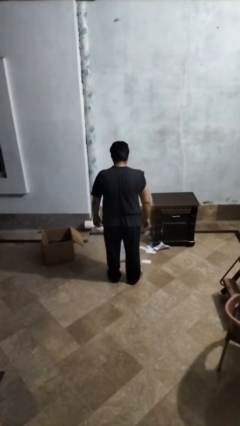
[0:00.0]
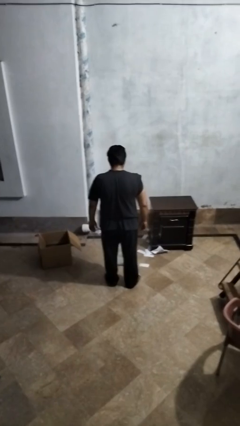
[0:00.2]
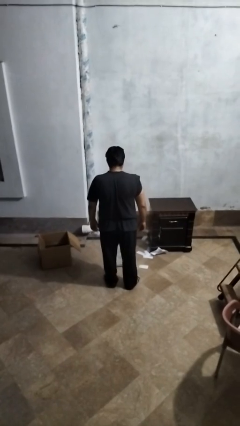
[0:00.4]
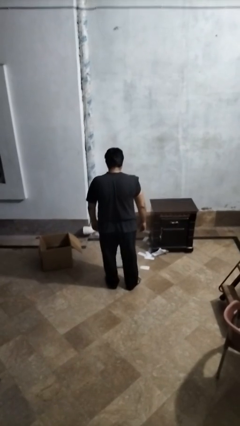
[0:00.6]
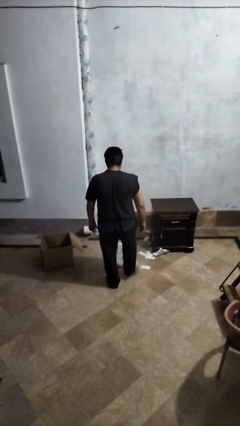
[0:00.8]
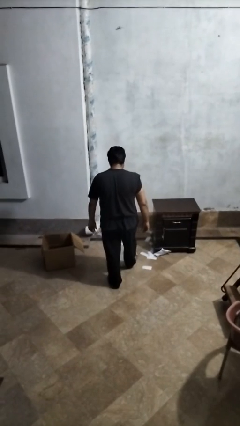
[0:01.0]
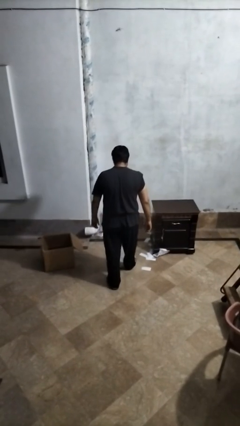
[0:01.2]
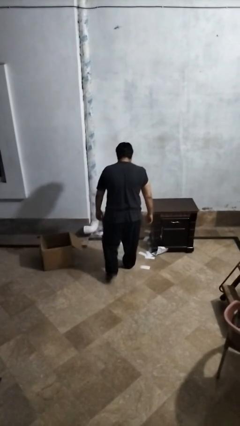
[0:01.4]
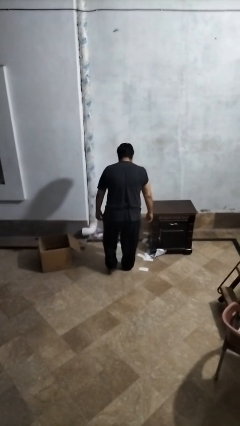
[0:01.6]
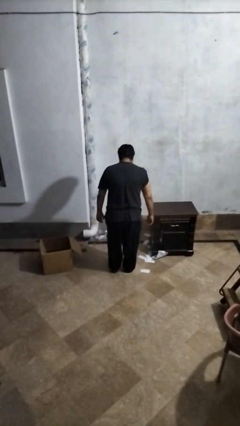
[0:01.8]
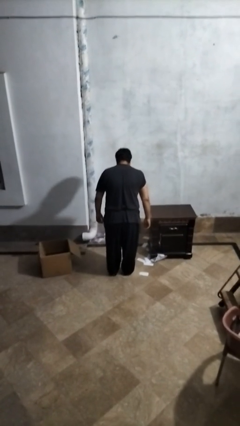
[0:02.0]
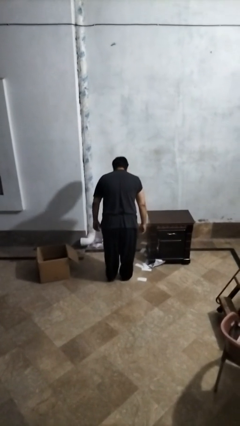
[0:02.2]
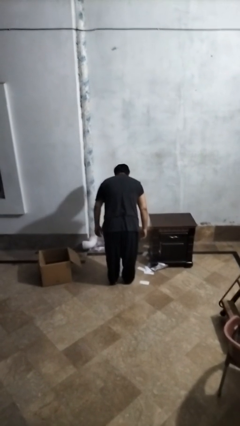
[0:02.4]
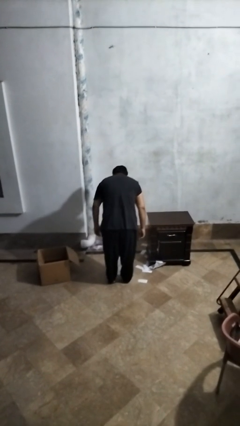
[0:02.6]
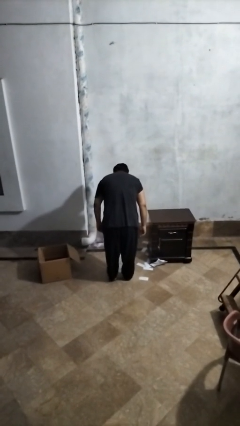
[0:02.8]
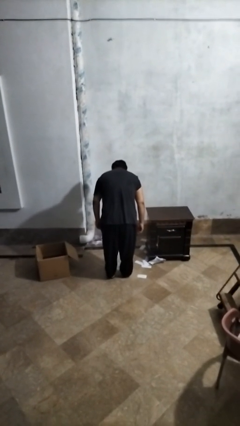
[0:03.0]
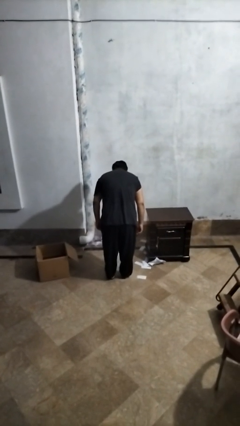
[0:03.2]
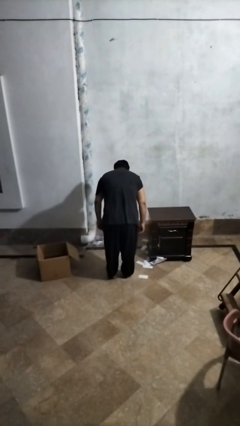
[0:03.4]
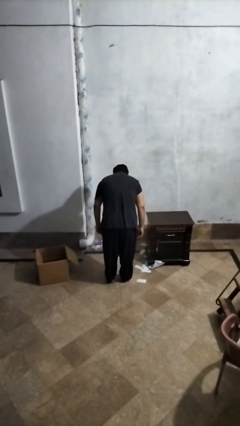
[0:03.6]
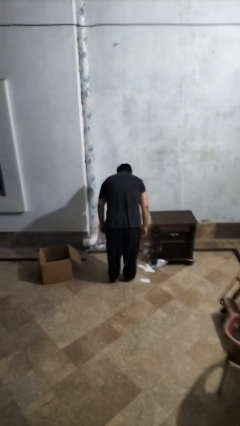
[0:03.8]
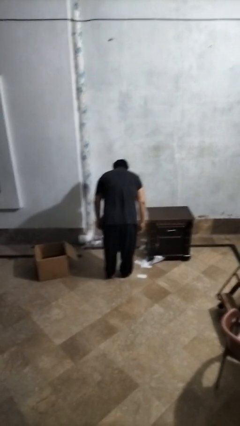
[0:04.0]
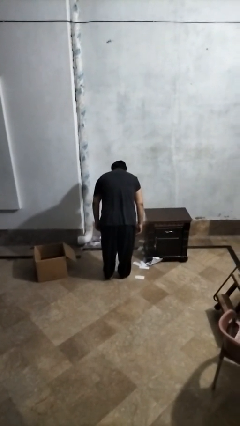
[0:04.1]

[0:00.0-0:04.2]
person uses bodyweight scale

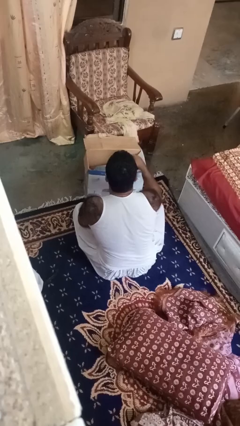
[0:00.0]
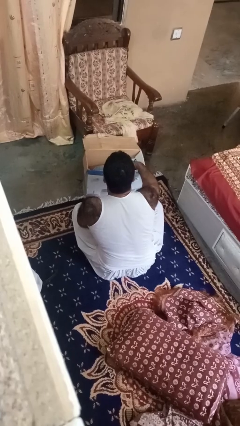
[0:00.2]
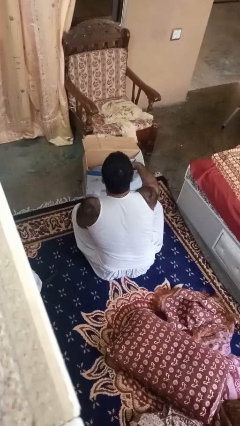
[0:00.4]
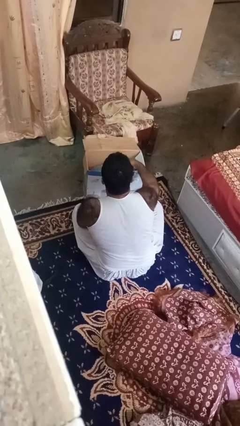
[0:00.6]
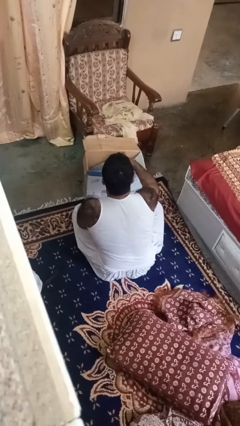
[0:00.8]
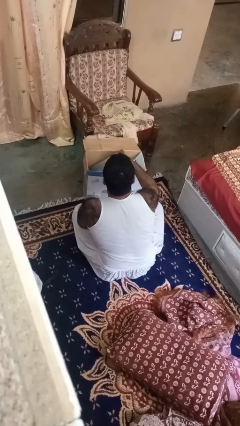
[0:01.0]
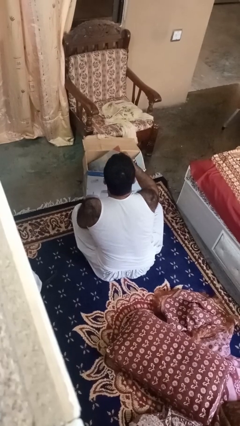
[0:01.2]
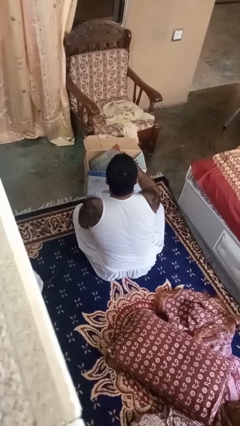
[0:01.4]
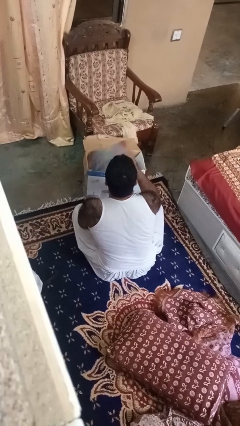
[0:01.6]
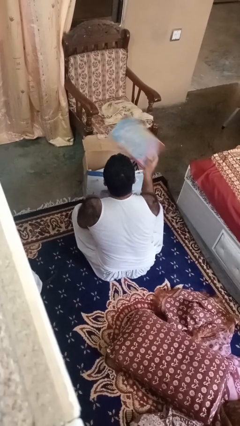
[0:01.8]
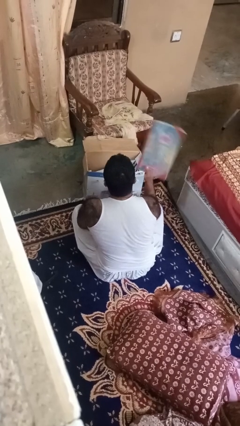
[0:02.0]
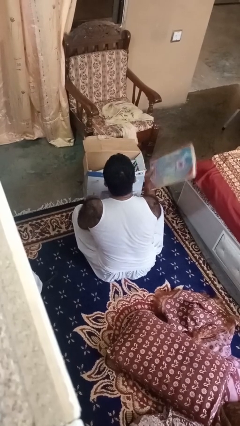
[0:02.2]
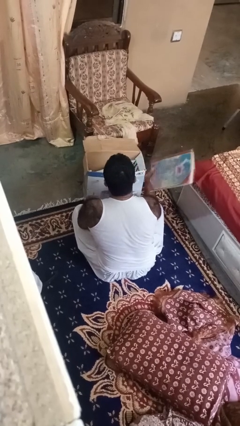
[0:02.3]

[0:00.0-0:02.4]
person takes object from box

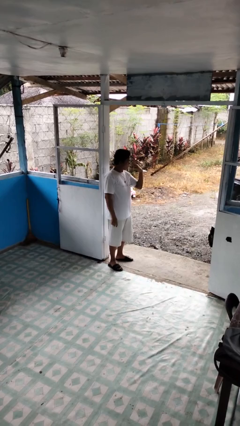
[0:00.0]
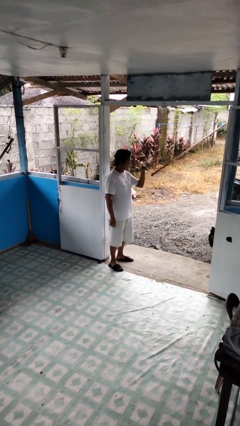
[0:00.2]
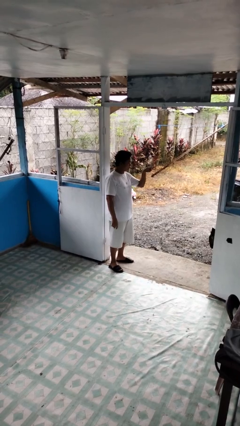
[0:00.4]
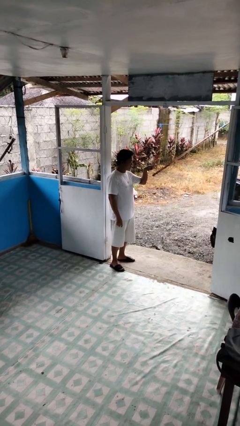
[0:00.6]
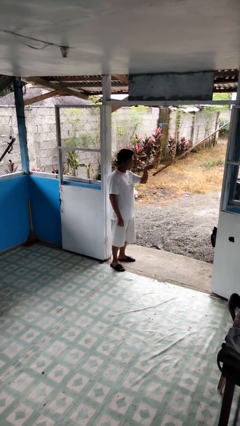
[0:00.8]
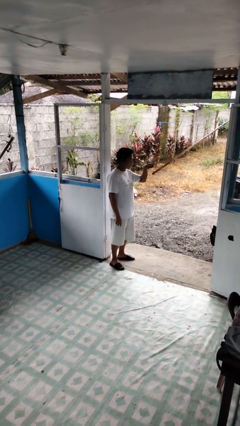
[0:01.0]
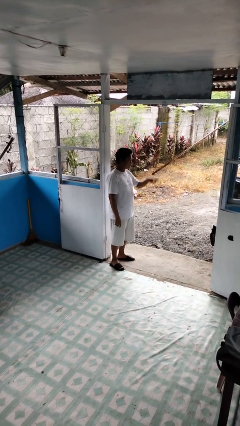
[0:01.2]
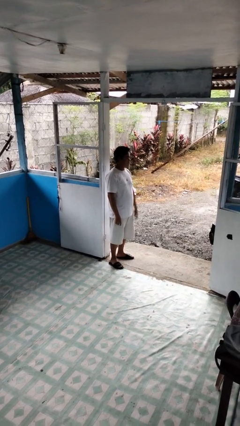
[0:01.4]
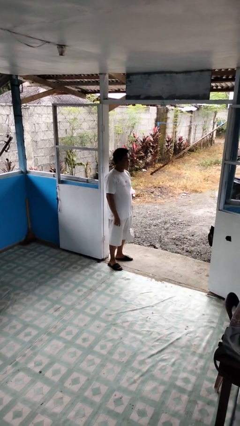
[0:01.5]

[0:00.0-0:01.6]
person gestures watch closely

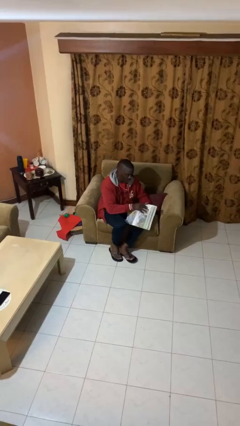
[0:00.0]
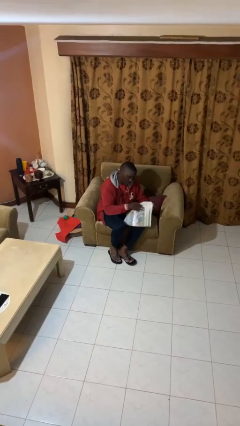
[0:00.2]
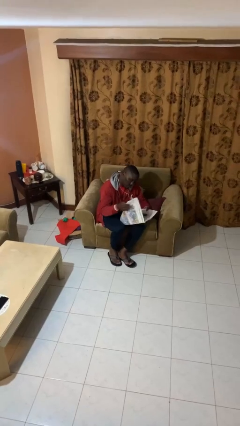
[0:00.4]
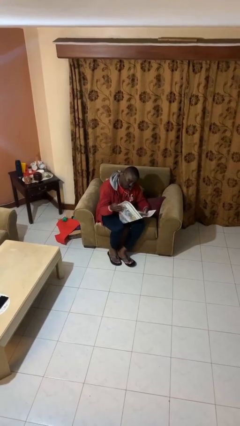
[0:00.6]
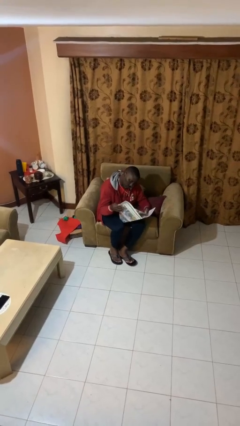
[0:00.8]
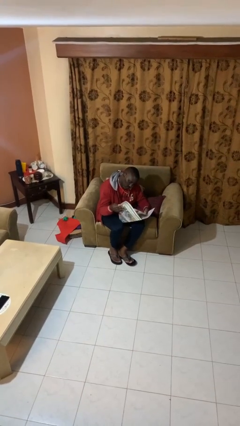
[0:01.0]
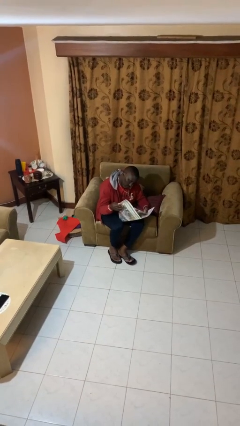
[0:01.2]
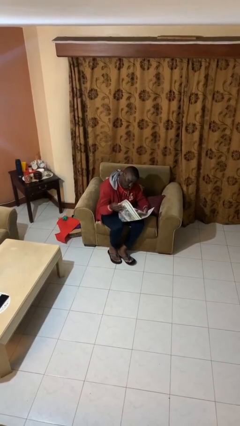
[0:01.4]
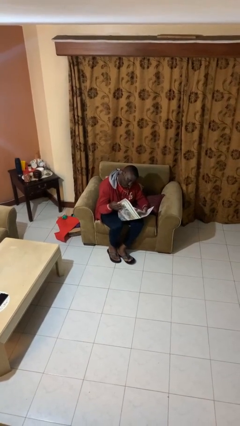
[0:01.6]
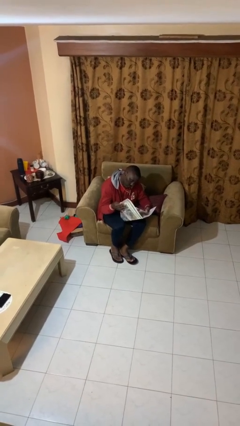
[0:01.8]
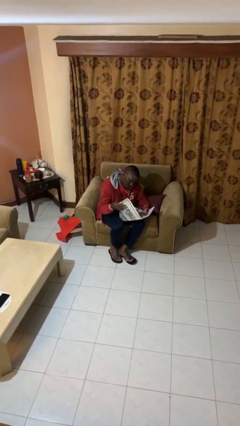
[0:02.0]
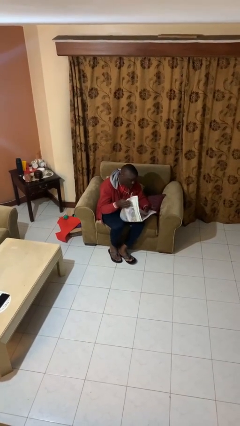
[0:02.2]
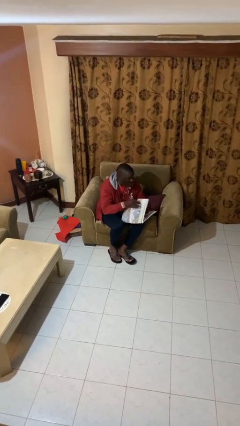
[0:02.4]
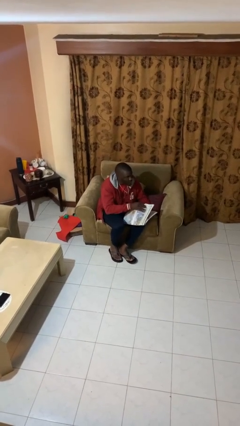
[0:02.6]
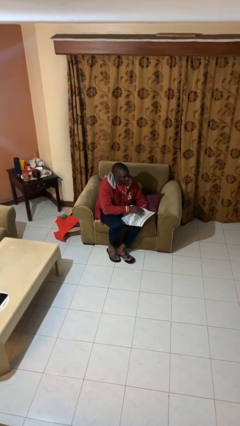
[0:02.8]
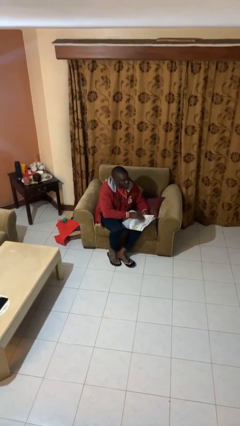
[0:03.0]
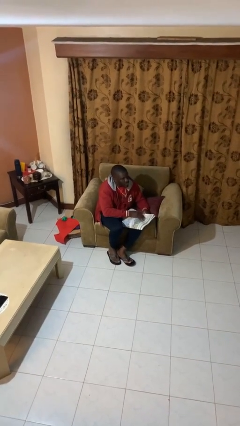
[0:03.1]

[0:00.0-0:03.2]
person reads newspaper

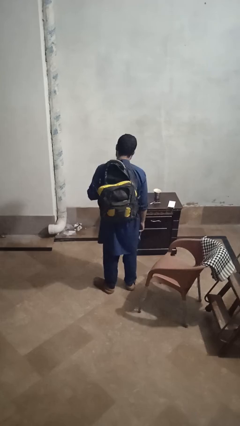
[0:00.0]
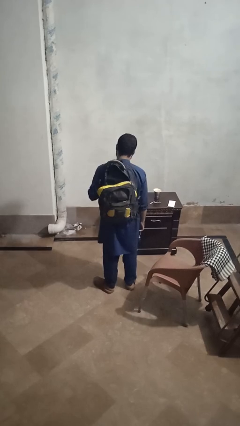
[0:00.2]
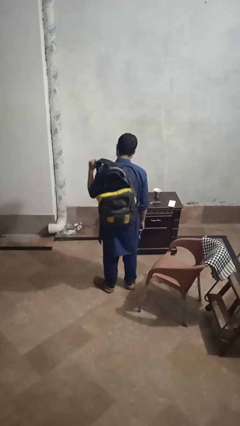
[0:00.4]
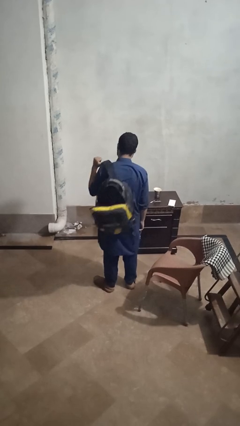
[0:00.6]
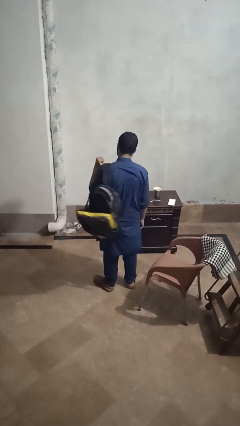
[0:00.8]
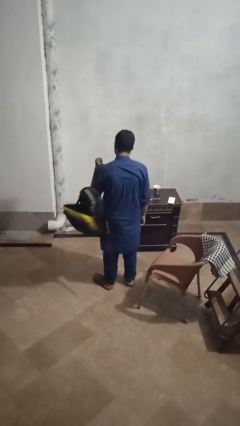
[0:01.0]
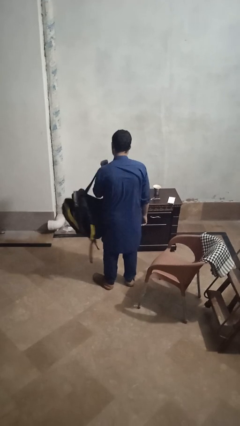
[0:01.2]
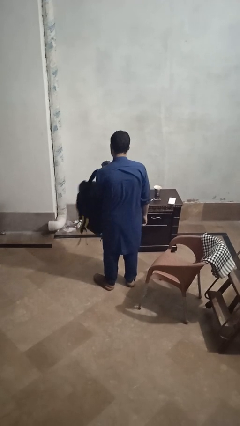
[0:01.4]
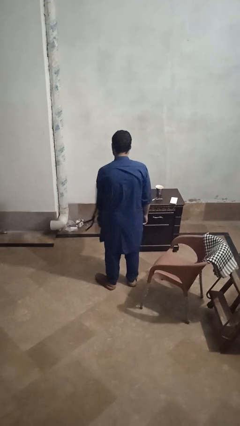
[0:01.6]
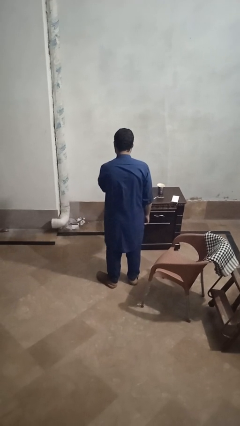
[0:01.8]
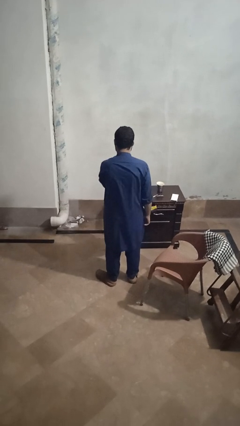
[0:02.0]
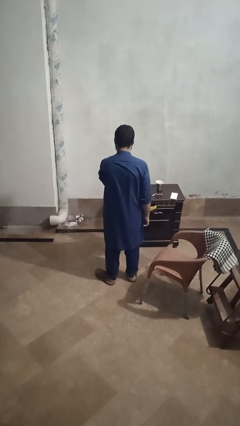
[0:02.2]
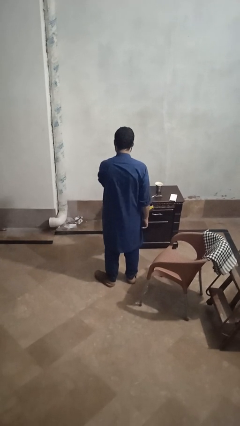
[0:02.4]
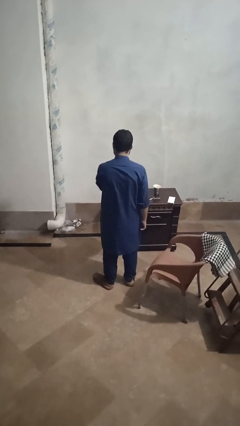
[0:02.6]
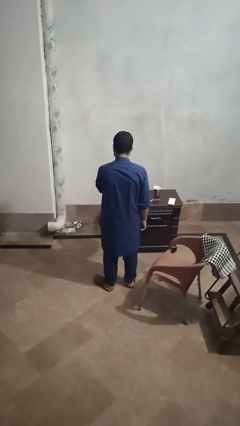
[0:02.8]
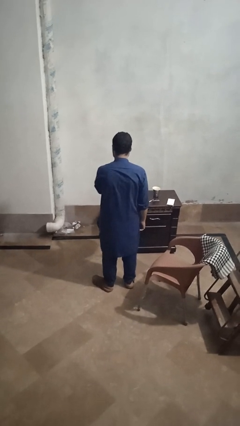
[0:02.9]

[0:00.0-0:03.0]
person takes off backpack

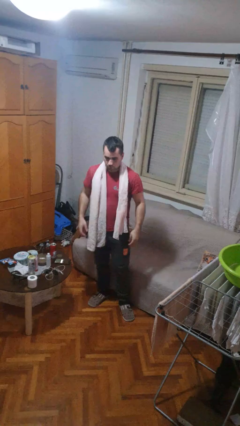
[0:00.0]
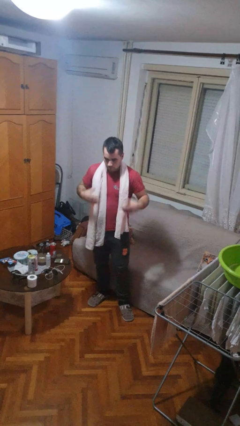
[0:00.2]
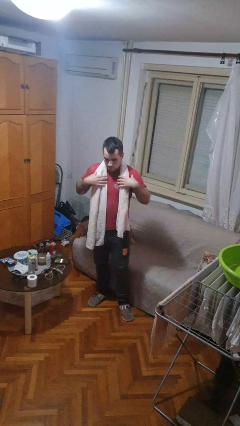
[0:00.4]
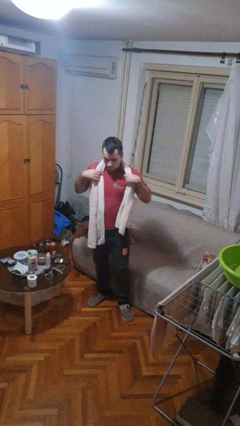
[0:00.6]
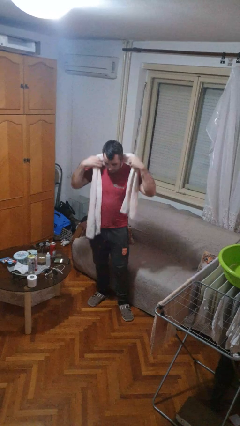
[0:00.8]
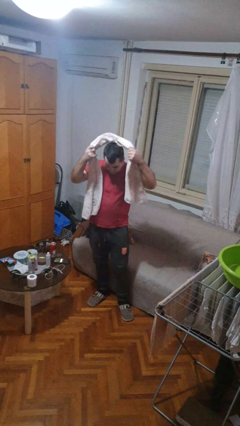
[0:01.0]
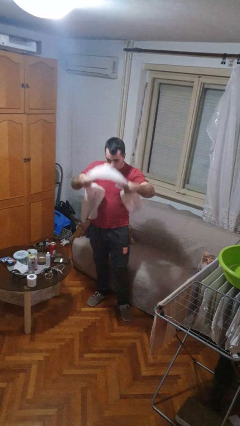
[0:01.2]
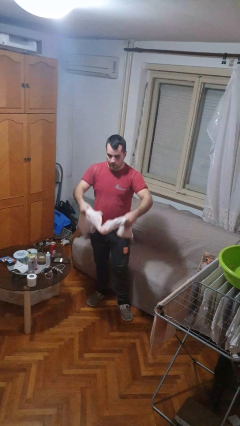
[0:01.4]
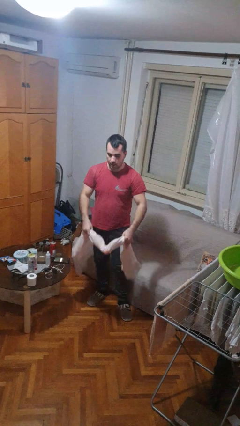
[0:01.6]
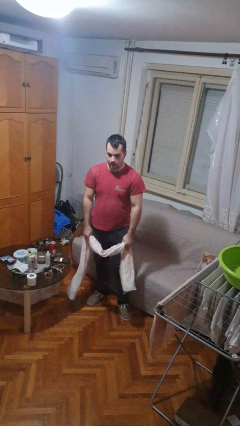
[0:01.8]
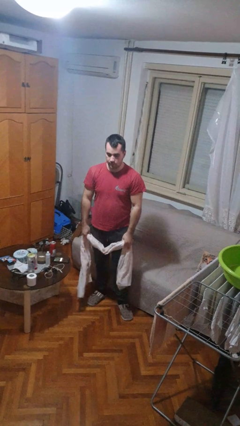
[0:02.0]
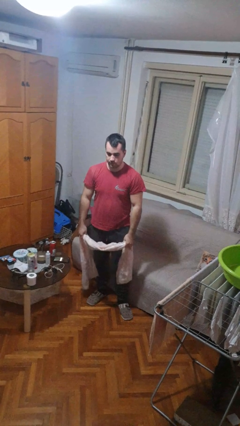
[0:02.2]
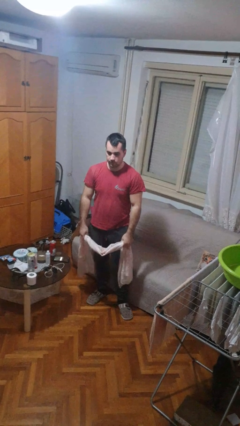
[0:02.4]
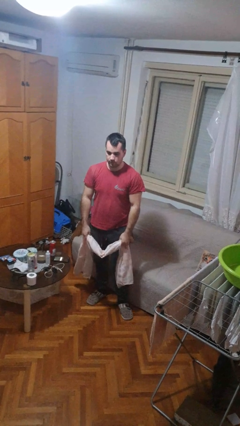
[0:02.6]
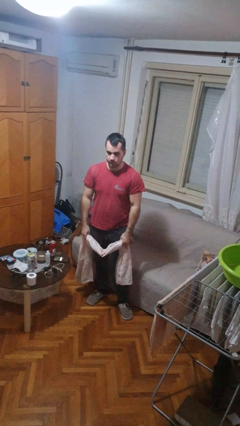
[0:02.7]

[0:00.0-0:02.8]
person takes off scarf
